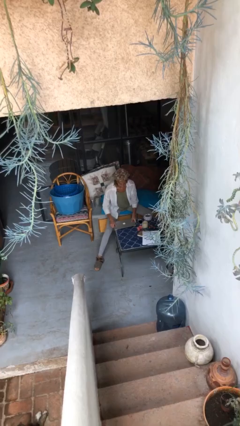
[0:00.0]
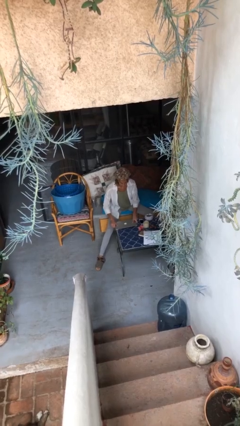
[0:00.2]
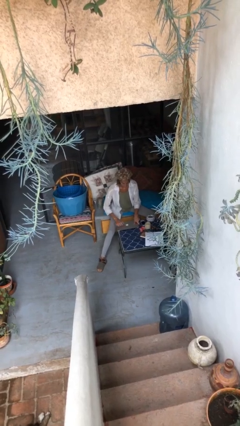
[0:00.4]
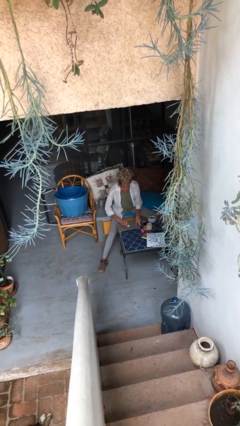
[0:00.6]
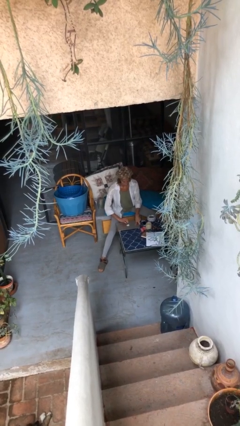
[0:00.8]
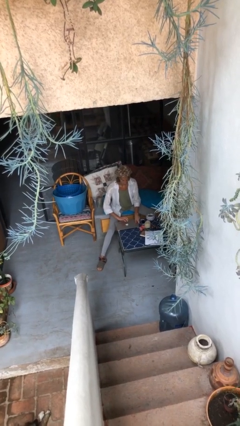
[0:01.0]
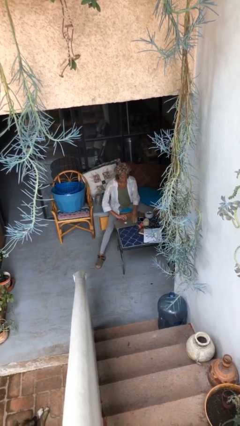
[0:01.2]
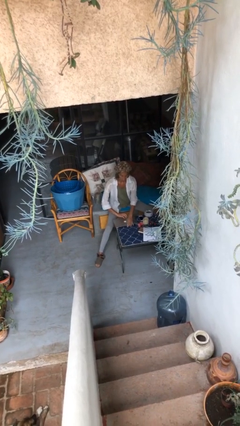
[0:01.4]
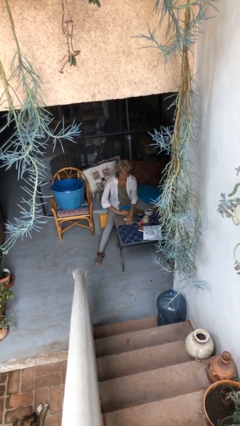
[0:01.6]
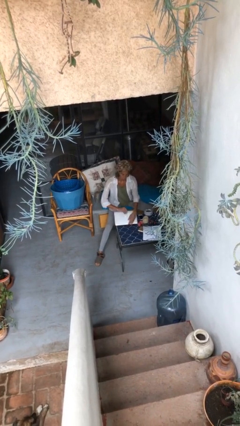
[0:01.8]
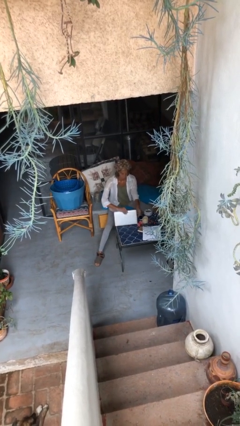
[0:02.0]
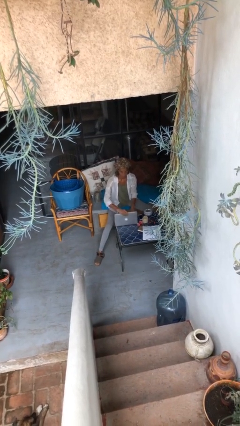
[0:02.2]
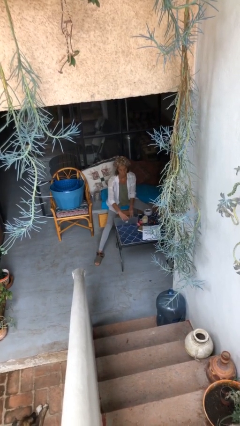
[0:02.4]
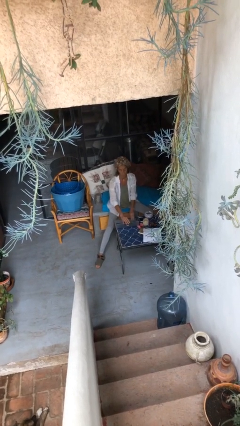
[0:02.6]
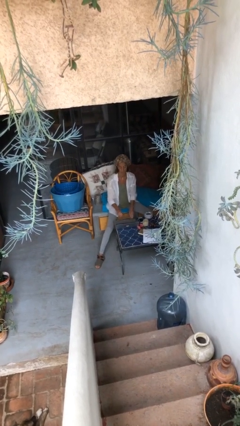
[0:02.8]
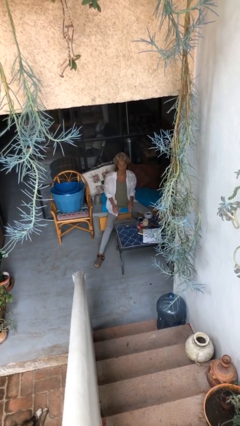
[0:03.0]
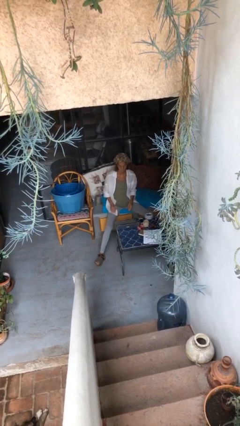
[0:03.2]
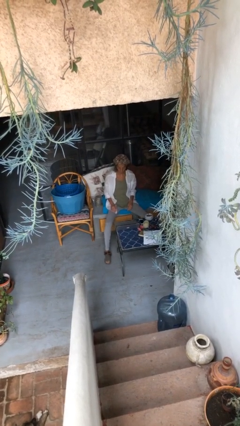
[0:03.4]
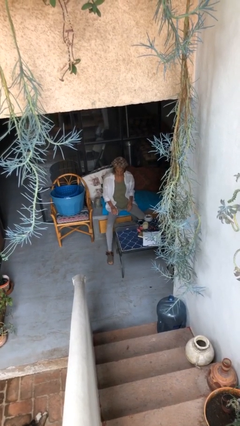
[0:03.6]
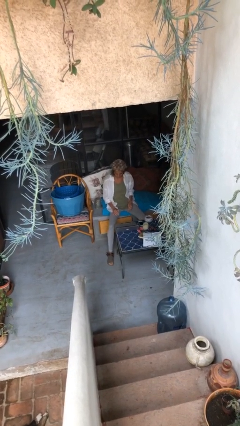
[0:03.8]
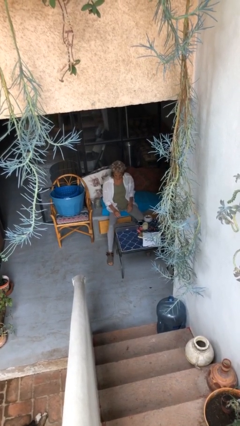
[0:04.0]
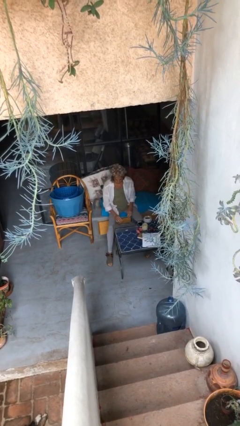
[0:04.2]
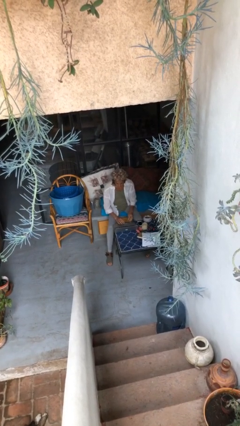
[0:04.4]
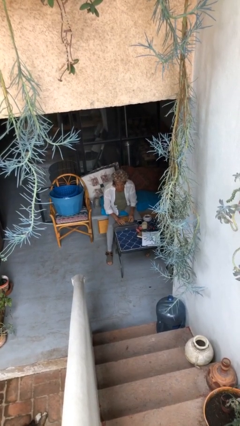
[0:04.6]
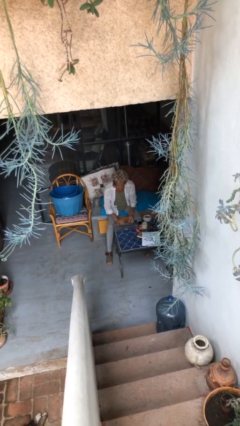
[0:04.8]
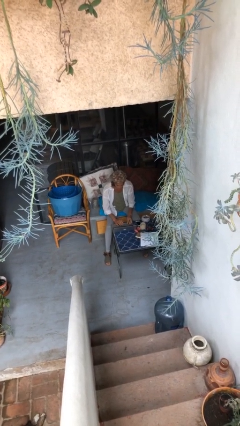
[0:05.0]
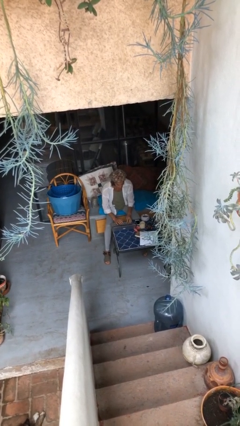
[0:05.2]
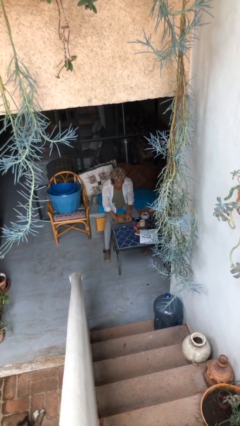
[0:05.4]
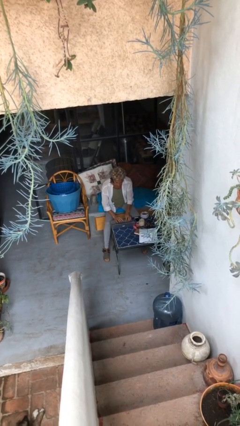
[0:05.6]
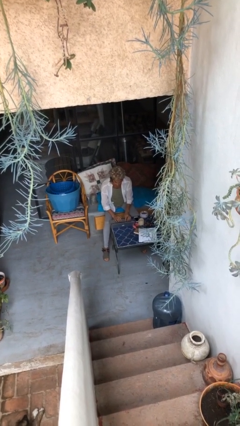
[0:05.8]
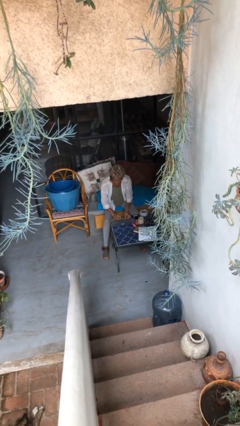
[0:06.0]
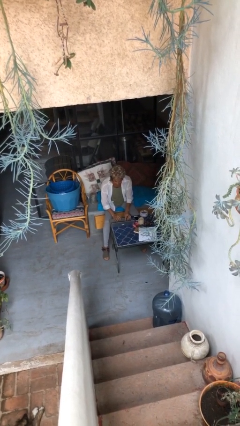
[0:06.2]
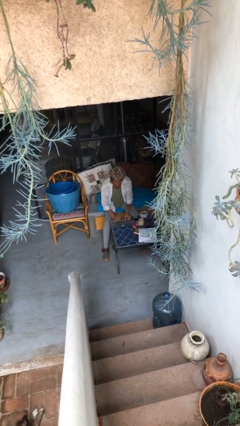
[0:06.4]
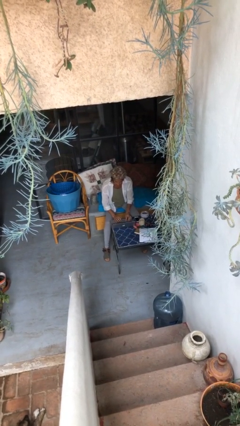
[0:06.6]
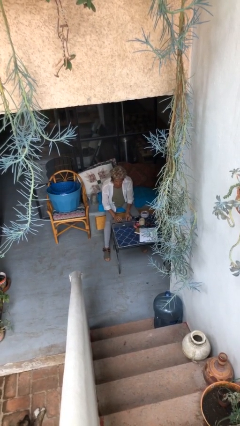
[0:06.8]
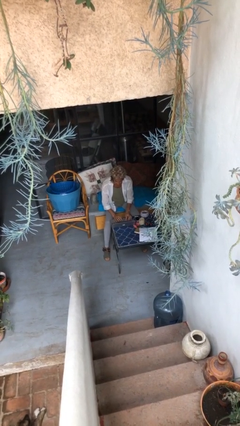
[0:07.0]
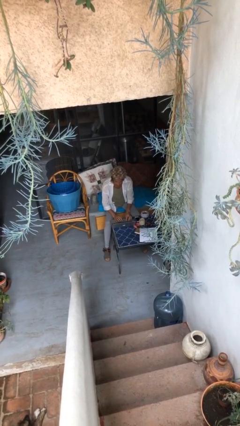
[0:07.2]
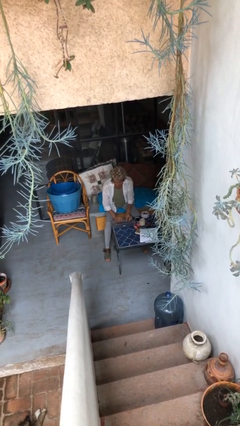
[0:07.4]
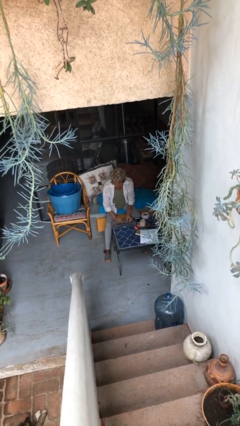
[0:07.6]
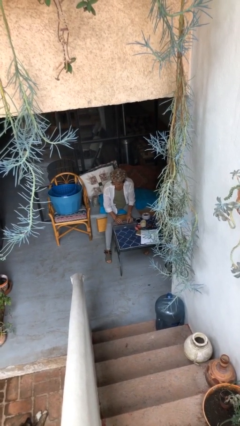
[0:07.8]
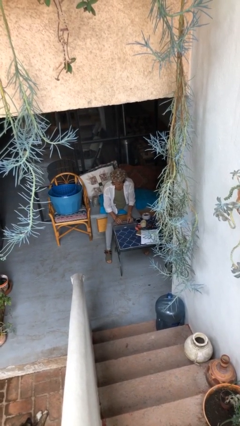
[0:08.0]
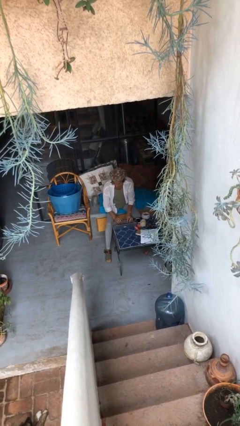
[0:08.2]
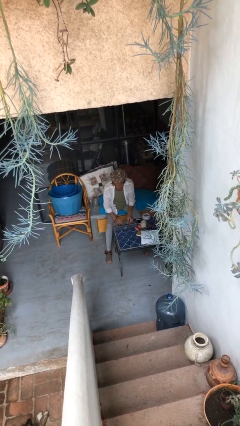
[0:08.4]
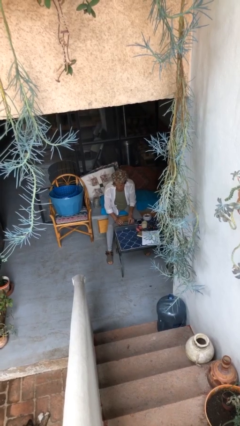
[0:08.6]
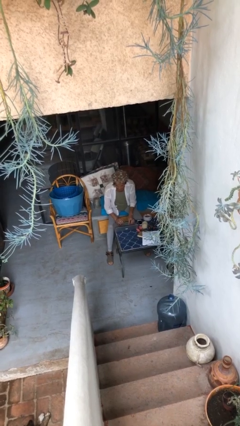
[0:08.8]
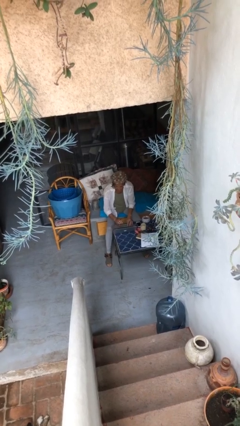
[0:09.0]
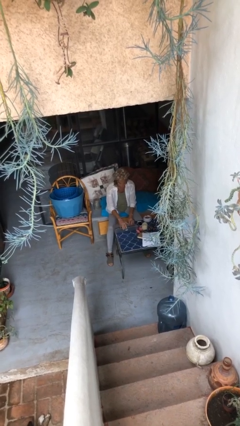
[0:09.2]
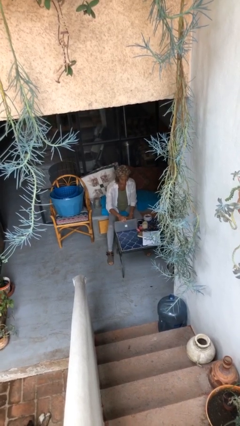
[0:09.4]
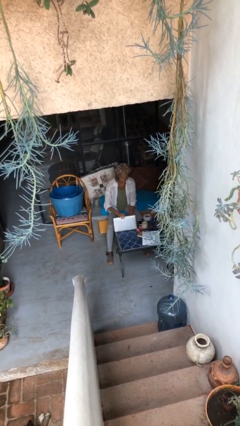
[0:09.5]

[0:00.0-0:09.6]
person interacts with laptop

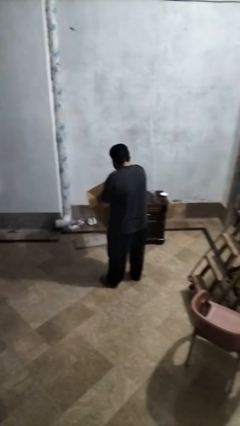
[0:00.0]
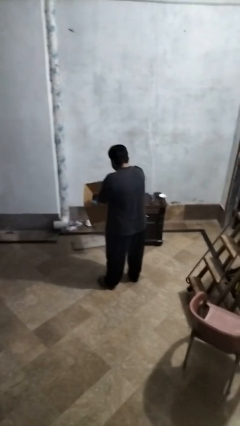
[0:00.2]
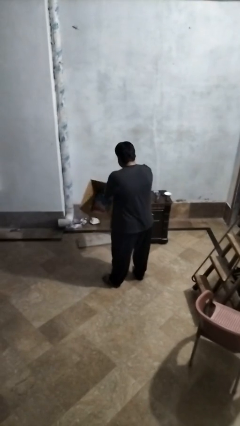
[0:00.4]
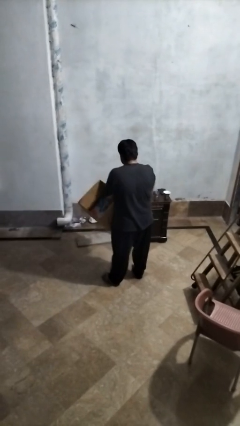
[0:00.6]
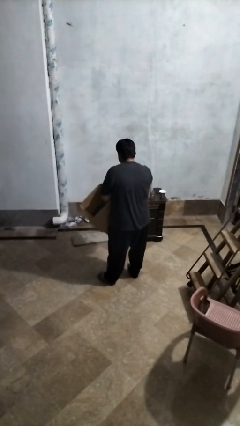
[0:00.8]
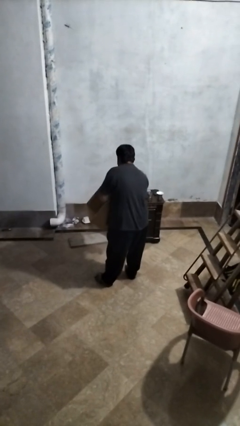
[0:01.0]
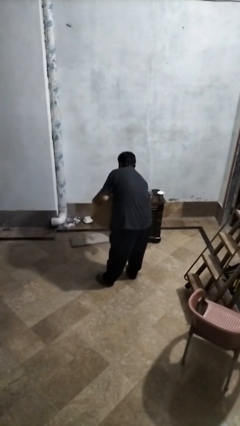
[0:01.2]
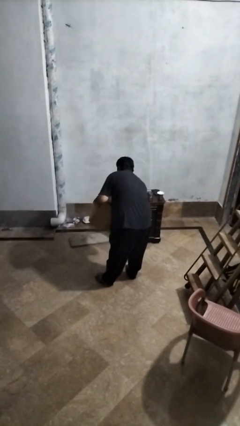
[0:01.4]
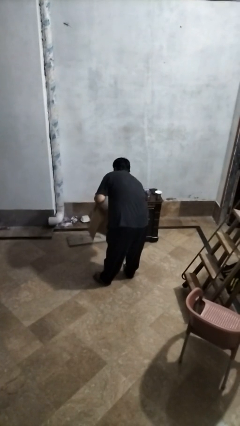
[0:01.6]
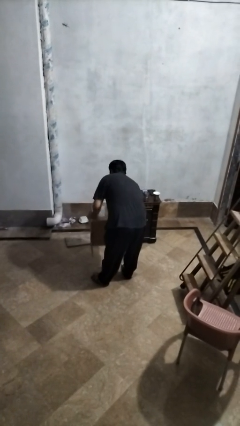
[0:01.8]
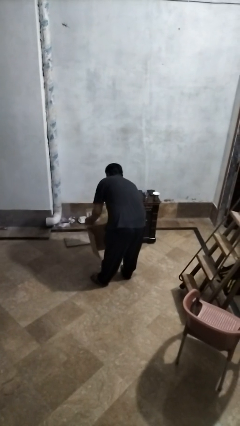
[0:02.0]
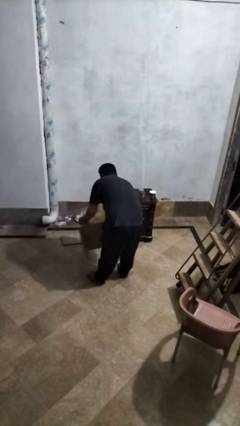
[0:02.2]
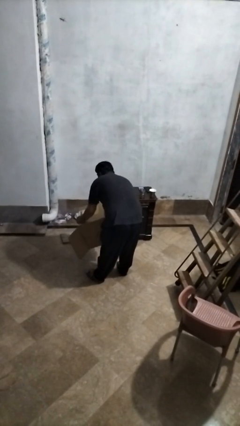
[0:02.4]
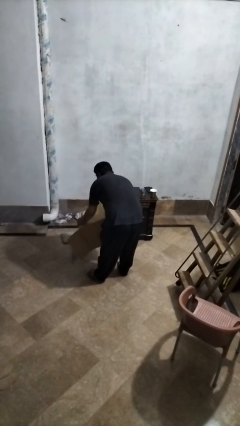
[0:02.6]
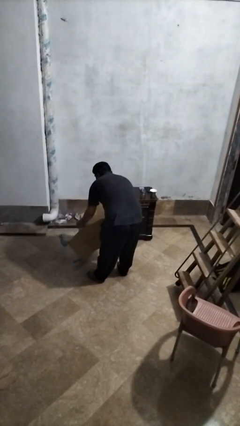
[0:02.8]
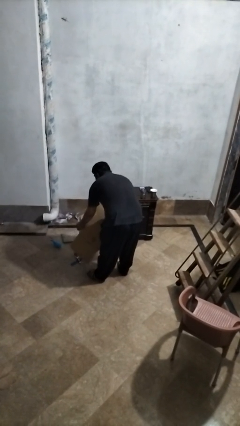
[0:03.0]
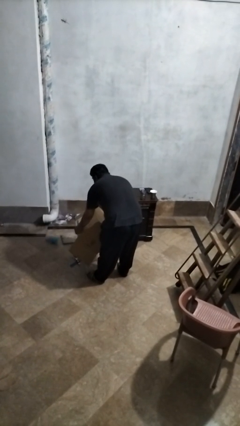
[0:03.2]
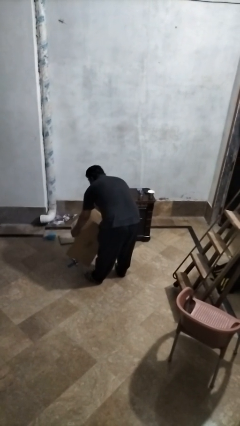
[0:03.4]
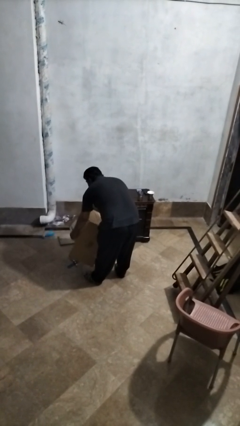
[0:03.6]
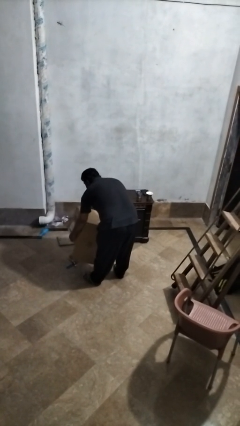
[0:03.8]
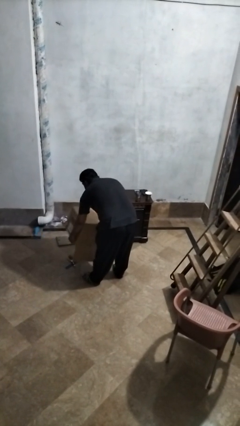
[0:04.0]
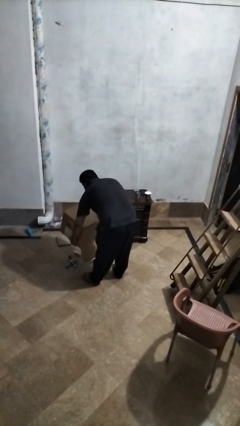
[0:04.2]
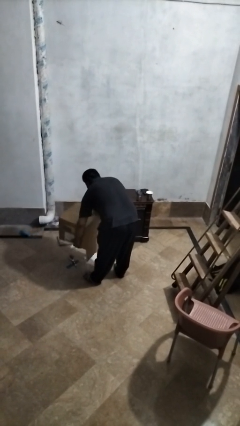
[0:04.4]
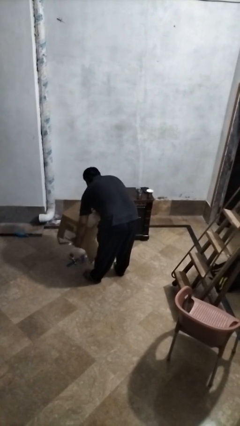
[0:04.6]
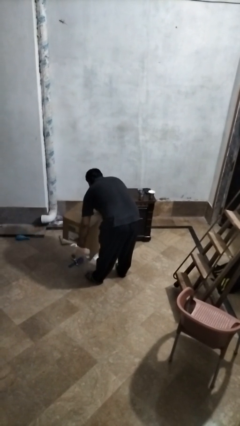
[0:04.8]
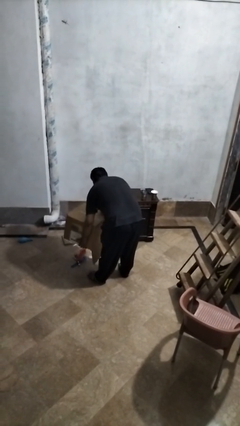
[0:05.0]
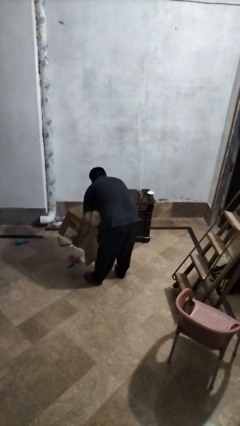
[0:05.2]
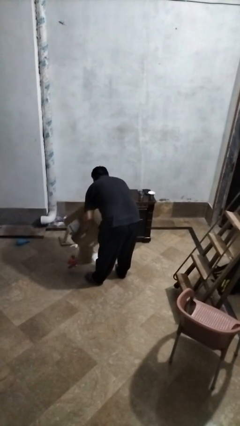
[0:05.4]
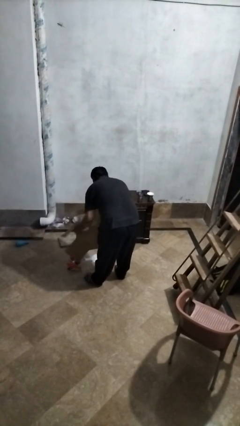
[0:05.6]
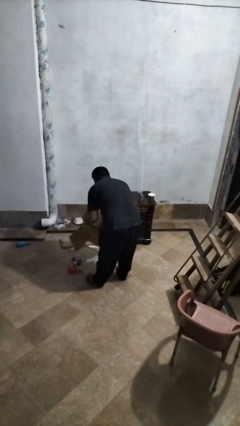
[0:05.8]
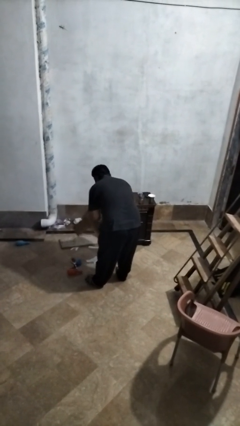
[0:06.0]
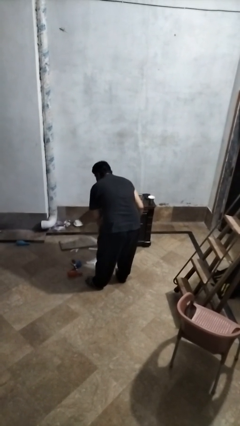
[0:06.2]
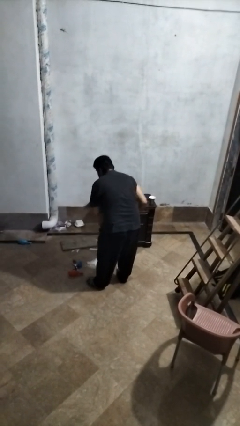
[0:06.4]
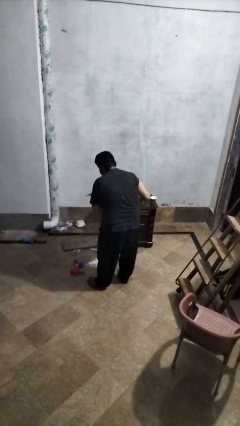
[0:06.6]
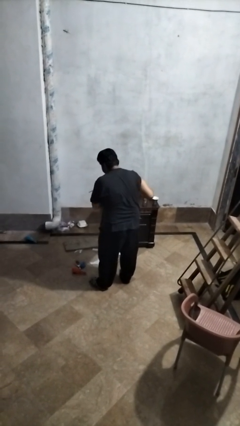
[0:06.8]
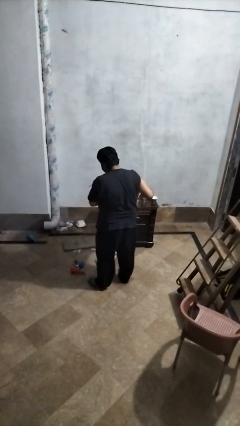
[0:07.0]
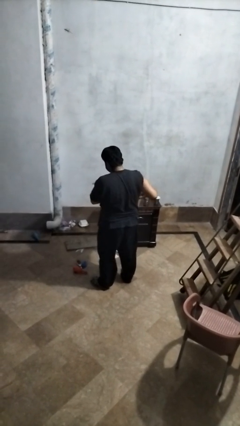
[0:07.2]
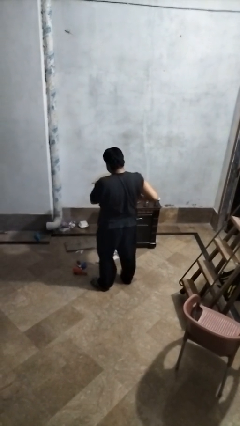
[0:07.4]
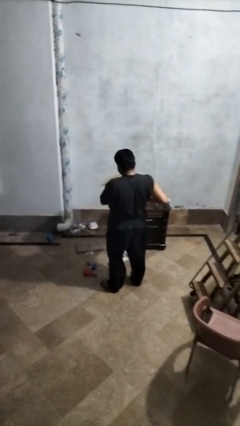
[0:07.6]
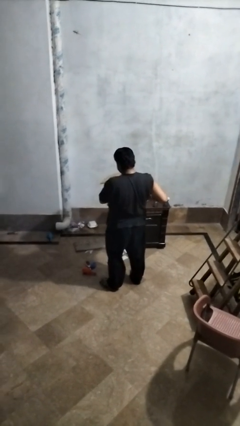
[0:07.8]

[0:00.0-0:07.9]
person unloads box onto floor

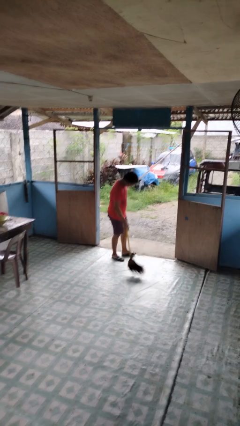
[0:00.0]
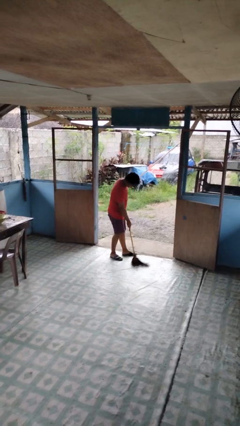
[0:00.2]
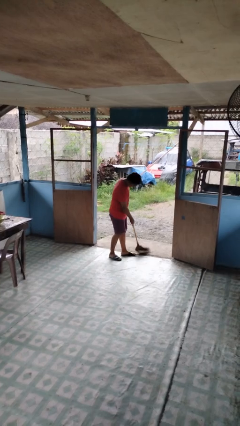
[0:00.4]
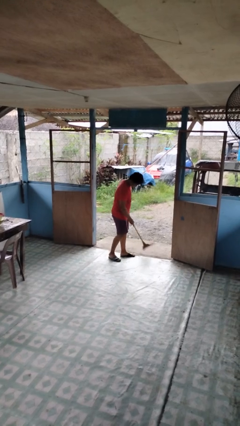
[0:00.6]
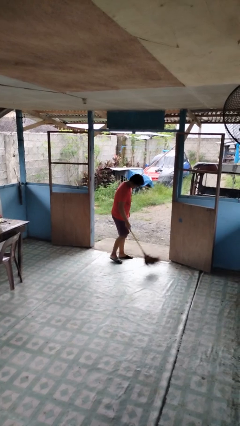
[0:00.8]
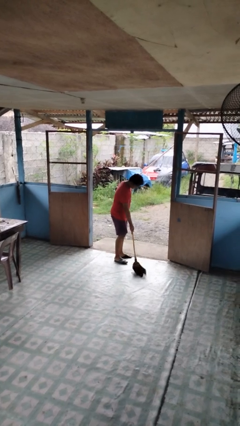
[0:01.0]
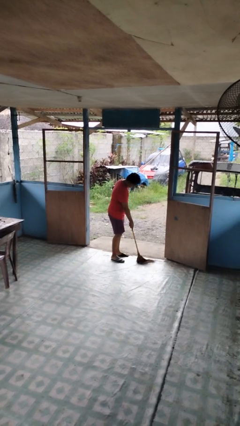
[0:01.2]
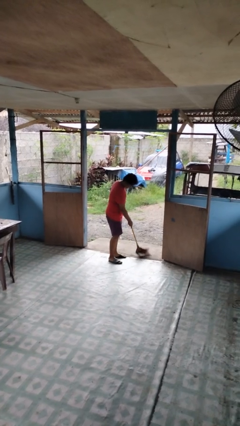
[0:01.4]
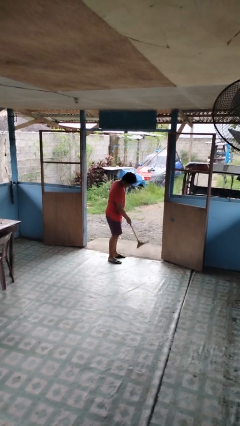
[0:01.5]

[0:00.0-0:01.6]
person sweeps floor
